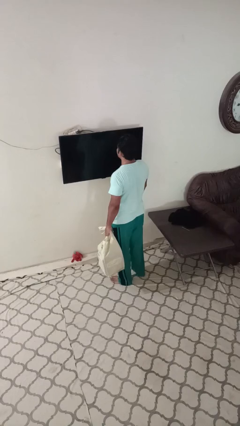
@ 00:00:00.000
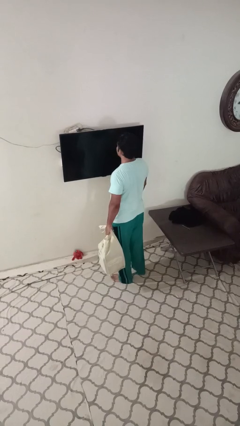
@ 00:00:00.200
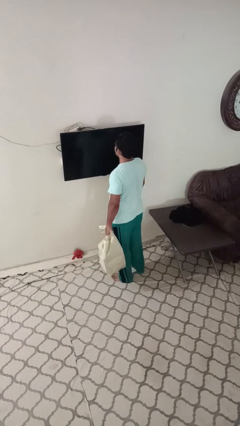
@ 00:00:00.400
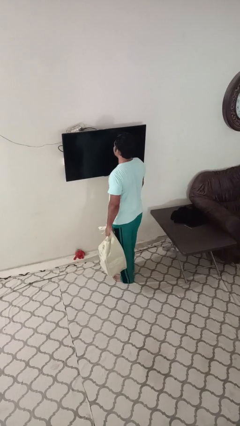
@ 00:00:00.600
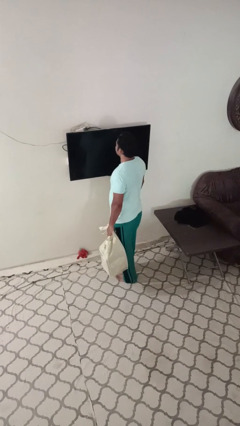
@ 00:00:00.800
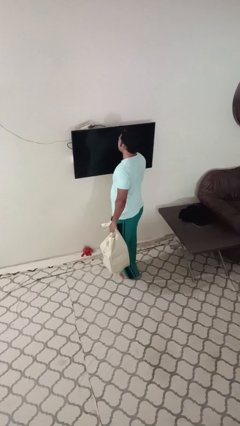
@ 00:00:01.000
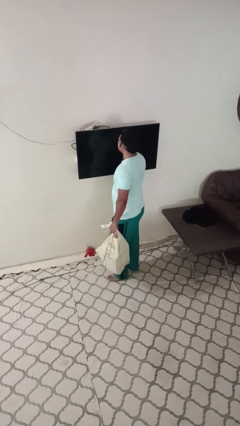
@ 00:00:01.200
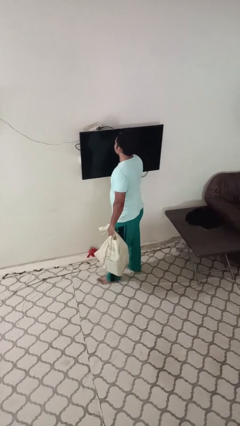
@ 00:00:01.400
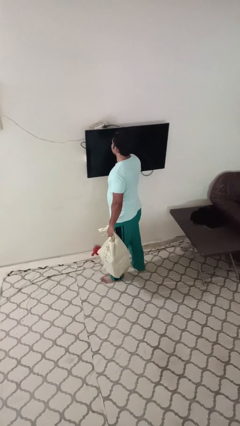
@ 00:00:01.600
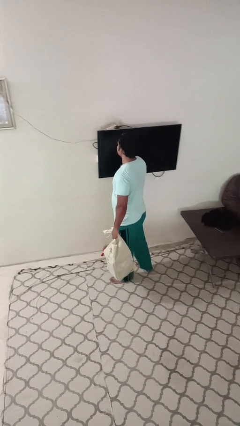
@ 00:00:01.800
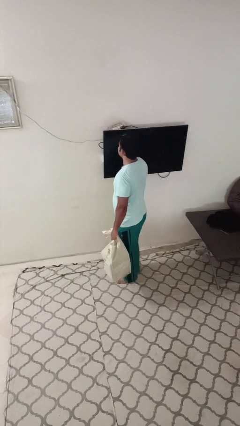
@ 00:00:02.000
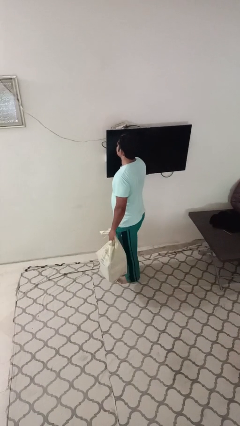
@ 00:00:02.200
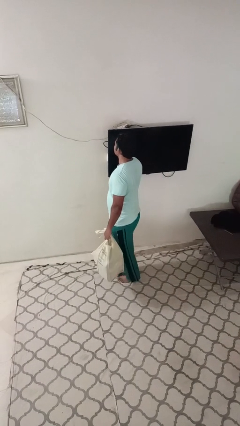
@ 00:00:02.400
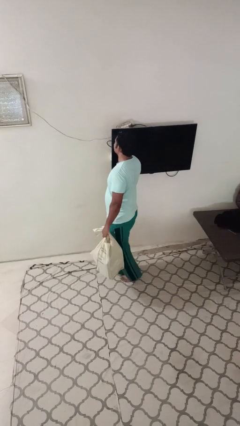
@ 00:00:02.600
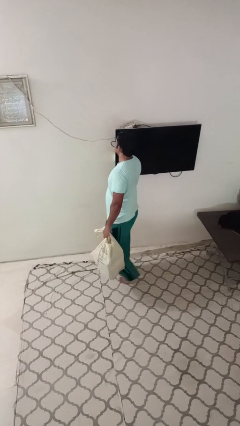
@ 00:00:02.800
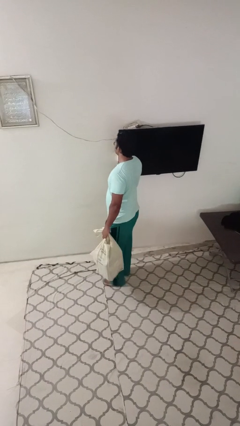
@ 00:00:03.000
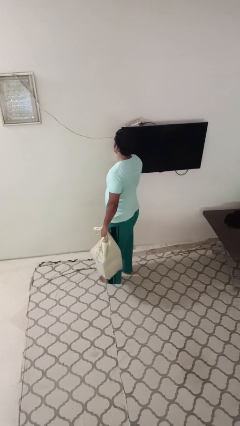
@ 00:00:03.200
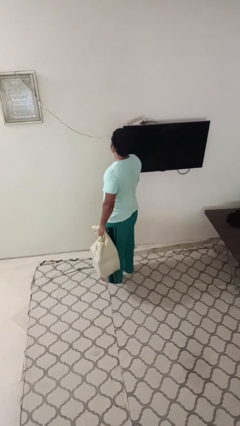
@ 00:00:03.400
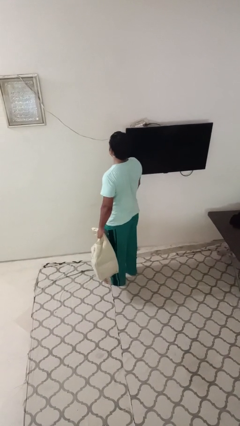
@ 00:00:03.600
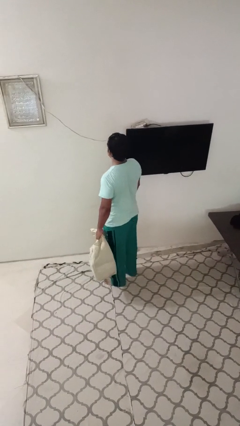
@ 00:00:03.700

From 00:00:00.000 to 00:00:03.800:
person carries groceries

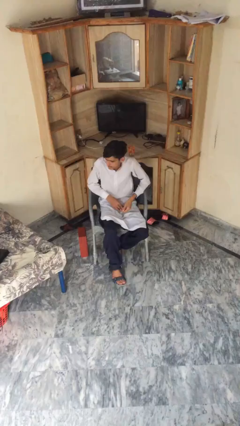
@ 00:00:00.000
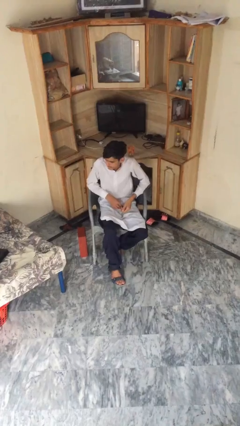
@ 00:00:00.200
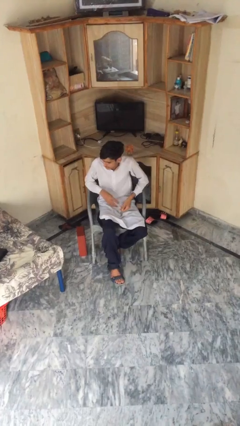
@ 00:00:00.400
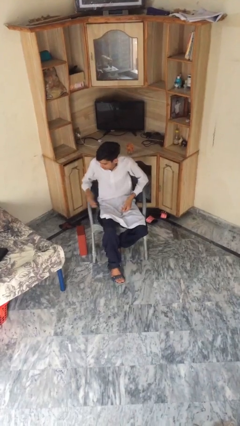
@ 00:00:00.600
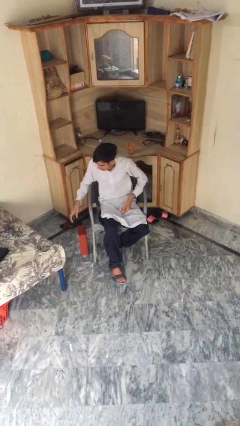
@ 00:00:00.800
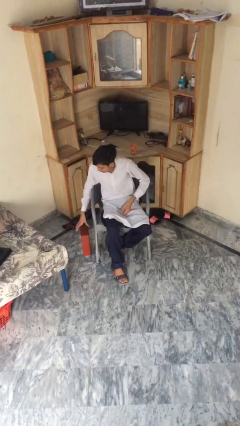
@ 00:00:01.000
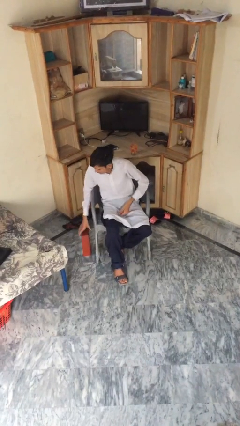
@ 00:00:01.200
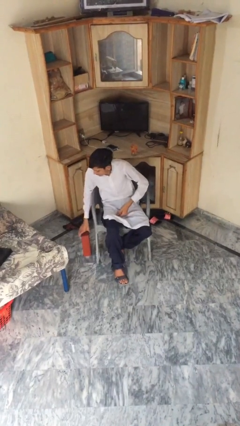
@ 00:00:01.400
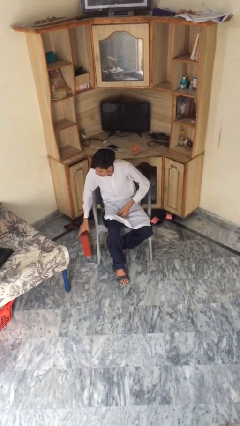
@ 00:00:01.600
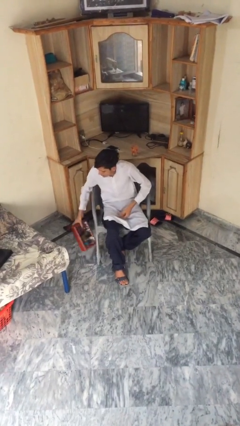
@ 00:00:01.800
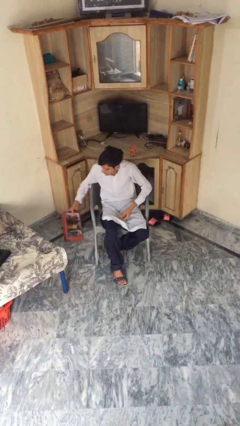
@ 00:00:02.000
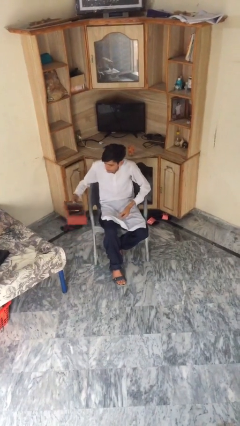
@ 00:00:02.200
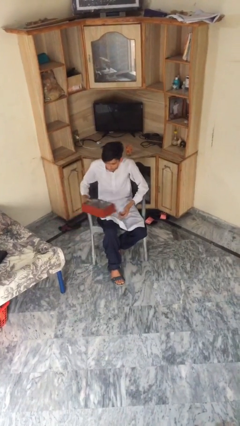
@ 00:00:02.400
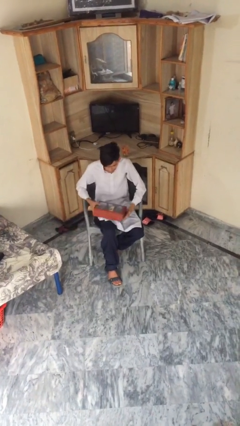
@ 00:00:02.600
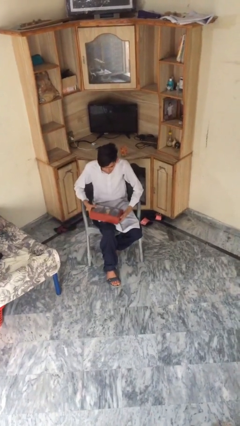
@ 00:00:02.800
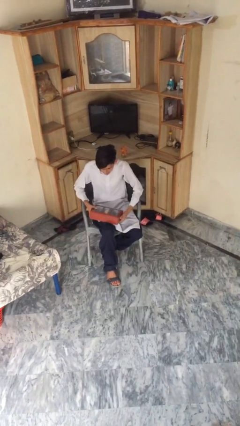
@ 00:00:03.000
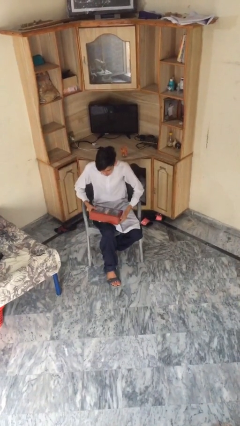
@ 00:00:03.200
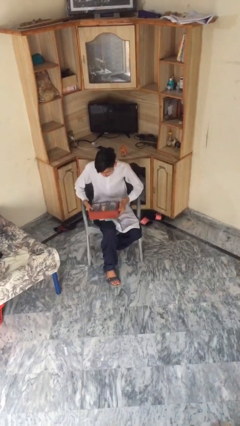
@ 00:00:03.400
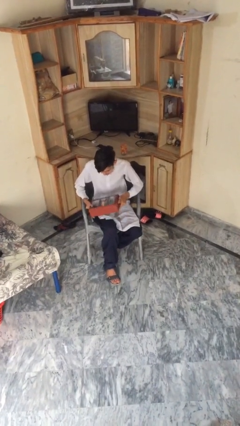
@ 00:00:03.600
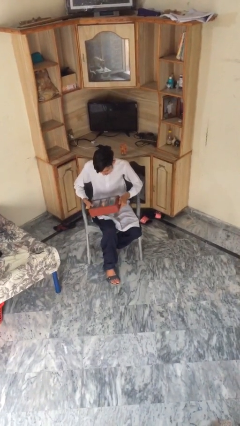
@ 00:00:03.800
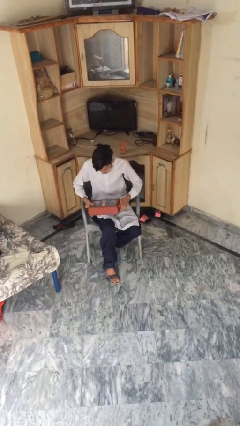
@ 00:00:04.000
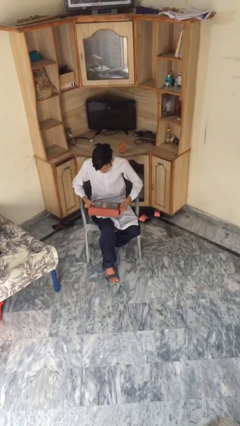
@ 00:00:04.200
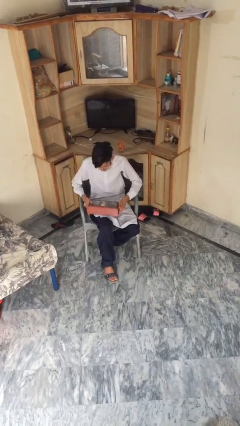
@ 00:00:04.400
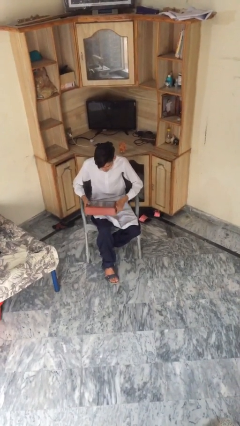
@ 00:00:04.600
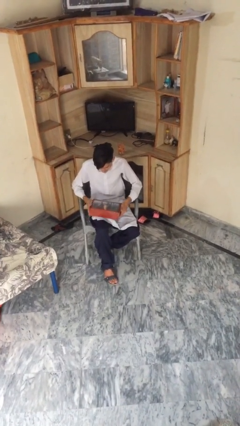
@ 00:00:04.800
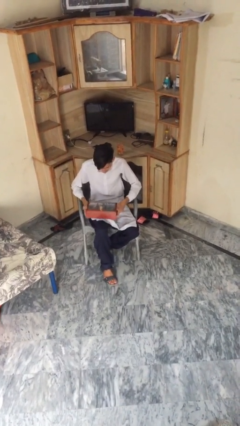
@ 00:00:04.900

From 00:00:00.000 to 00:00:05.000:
person picks up object from floor

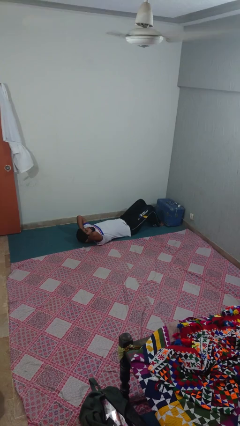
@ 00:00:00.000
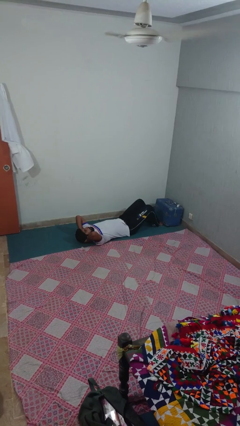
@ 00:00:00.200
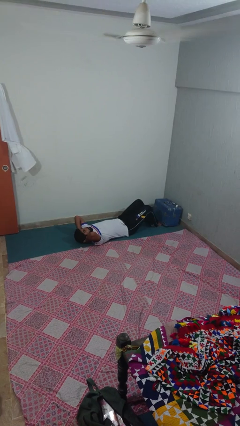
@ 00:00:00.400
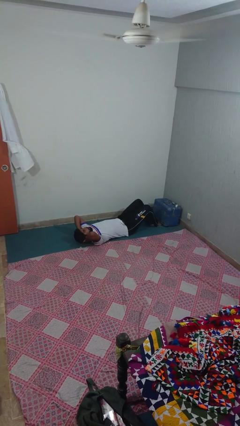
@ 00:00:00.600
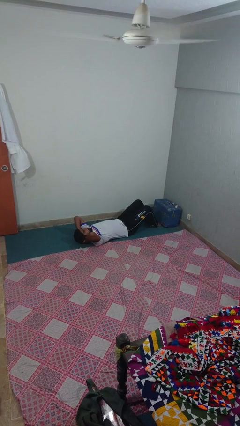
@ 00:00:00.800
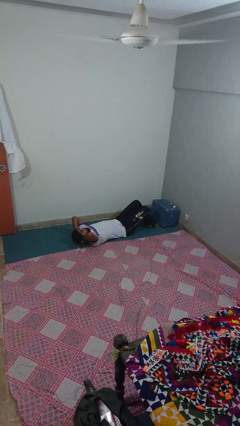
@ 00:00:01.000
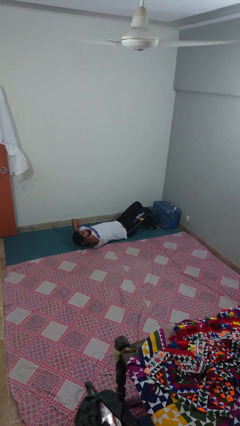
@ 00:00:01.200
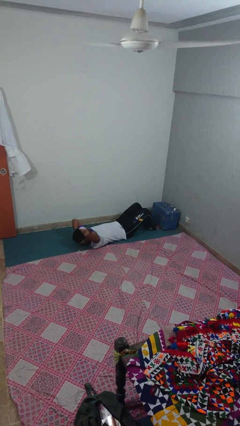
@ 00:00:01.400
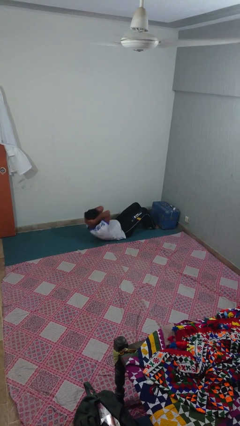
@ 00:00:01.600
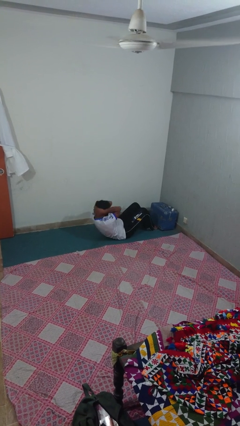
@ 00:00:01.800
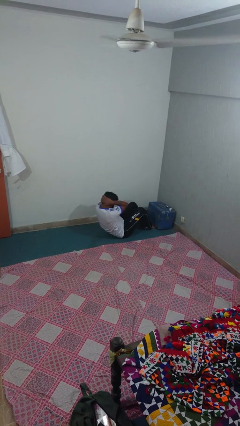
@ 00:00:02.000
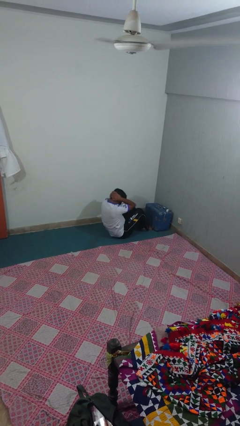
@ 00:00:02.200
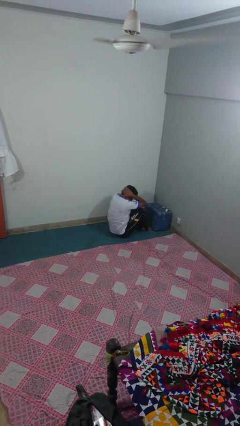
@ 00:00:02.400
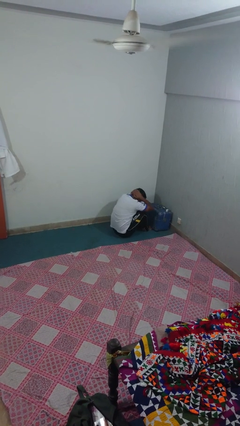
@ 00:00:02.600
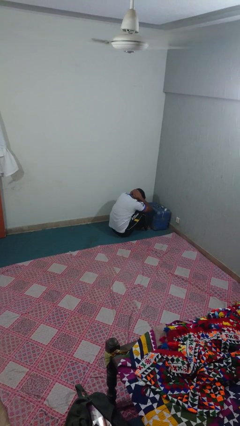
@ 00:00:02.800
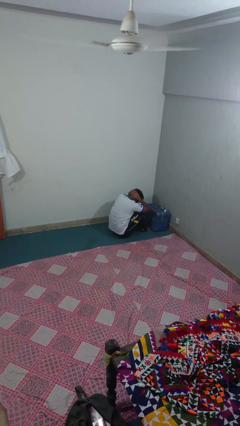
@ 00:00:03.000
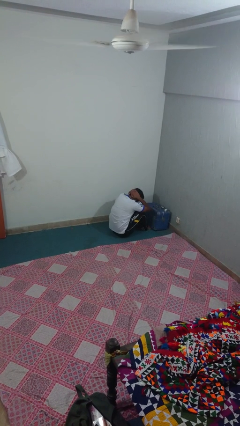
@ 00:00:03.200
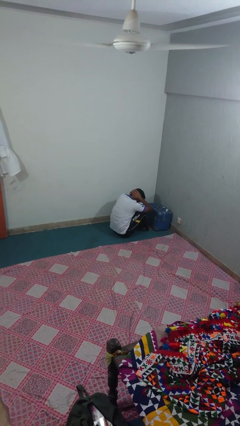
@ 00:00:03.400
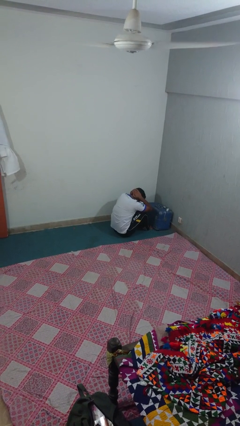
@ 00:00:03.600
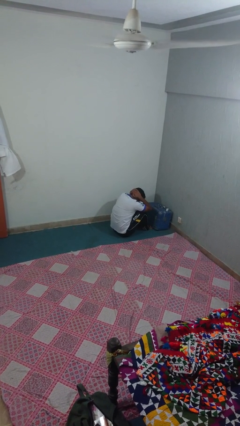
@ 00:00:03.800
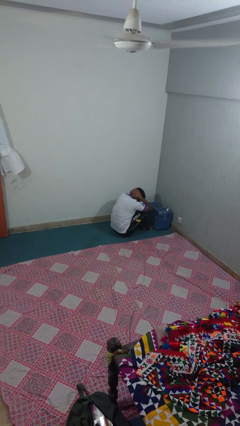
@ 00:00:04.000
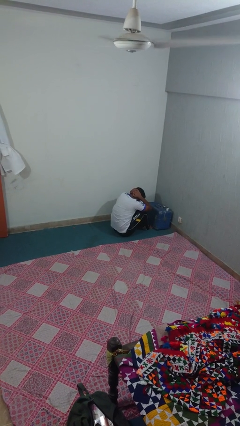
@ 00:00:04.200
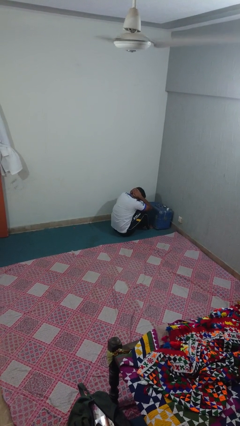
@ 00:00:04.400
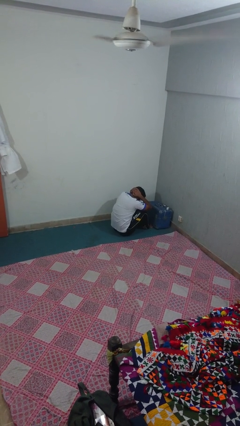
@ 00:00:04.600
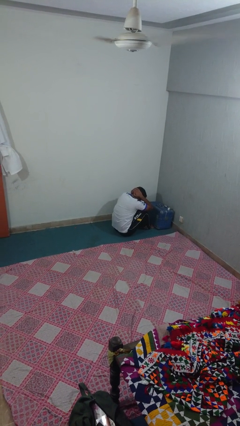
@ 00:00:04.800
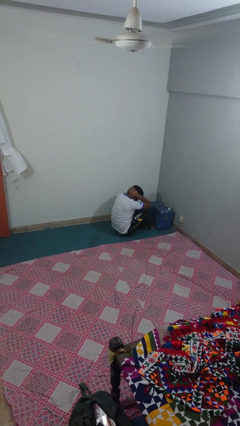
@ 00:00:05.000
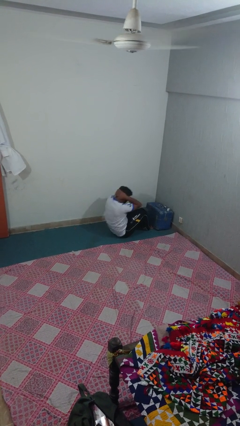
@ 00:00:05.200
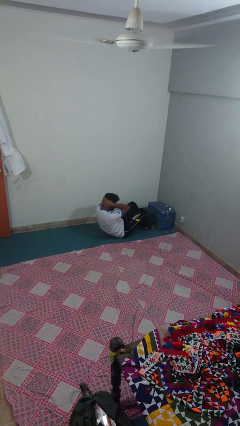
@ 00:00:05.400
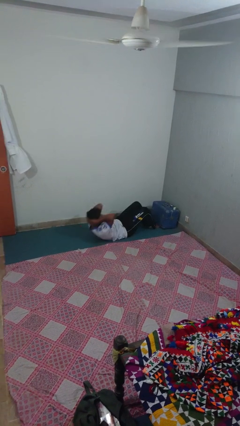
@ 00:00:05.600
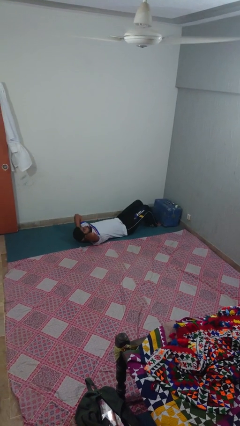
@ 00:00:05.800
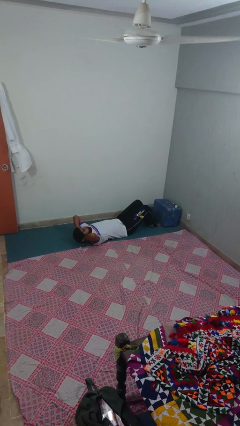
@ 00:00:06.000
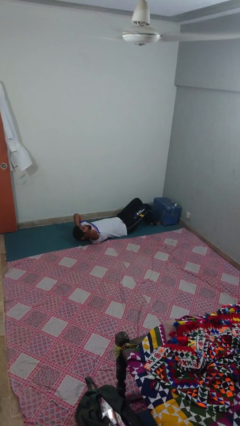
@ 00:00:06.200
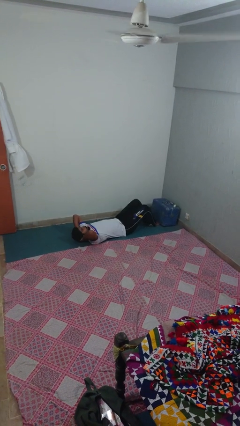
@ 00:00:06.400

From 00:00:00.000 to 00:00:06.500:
person exercises with situp

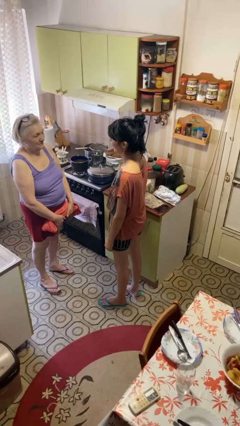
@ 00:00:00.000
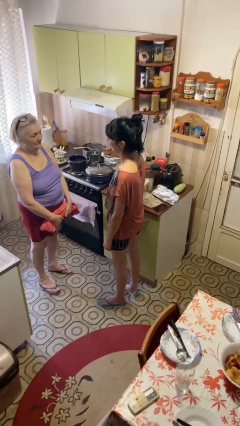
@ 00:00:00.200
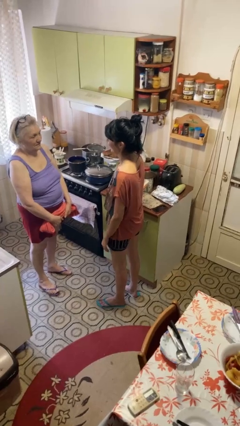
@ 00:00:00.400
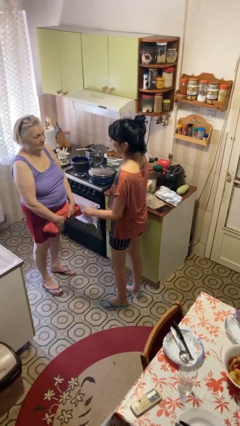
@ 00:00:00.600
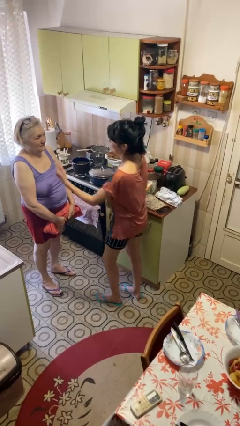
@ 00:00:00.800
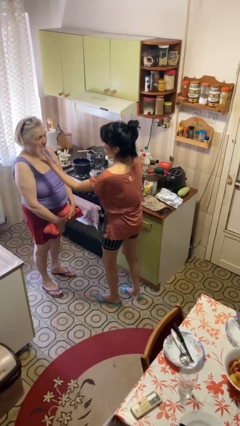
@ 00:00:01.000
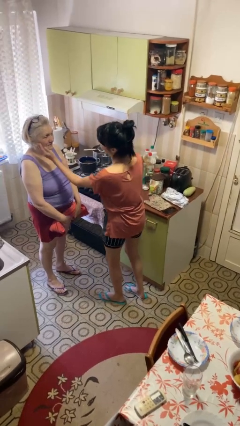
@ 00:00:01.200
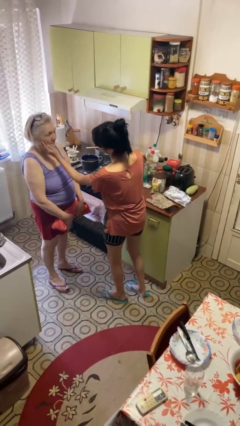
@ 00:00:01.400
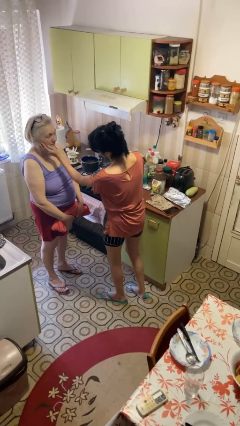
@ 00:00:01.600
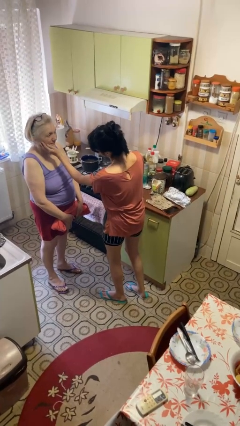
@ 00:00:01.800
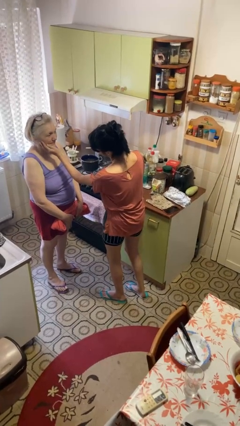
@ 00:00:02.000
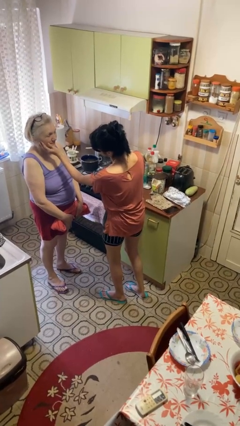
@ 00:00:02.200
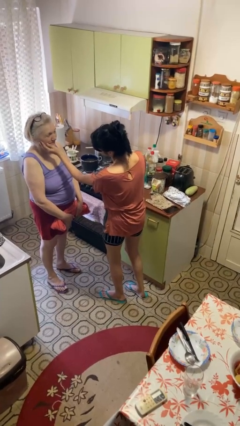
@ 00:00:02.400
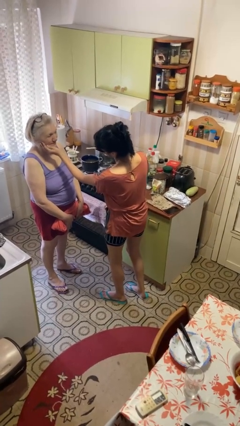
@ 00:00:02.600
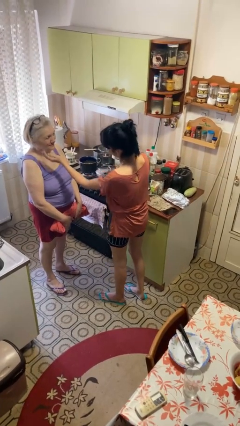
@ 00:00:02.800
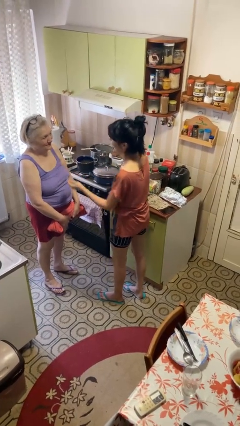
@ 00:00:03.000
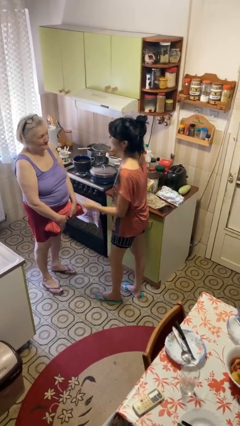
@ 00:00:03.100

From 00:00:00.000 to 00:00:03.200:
person touches face of person
